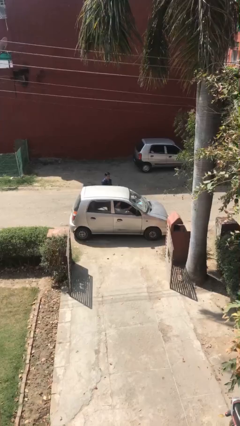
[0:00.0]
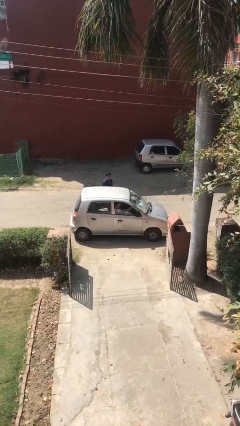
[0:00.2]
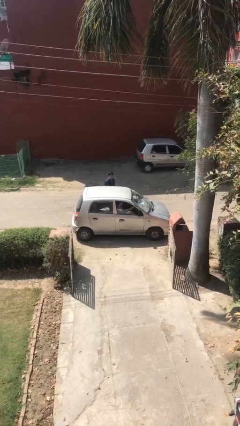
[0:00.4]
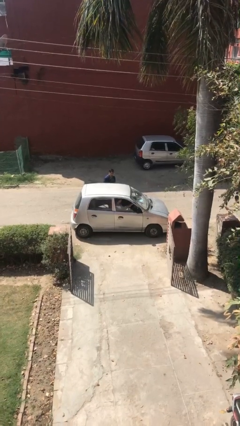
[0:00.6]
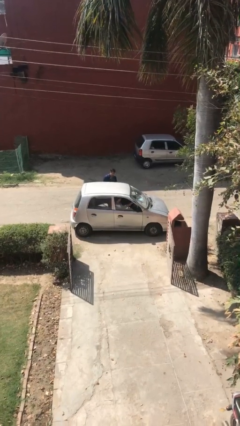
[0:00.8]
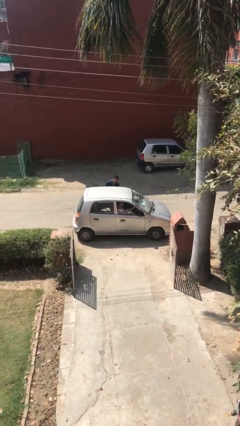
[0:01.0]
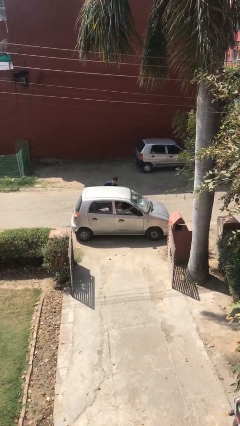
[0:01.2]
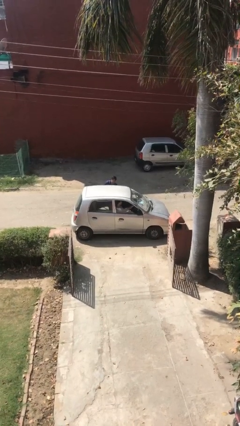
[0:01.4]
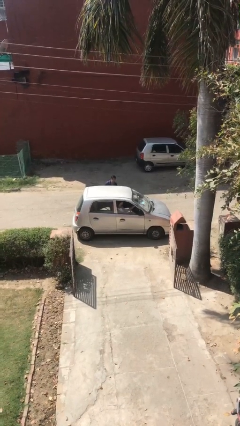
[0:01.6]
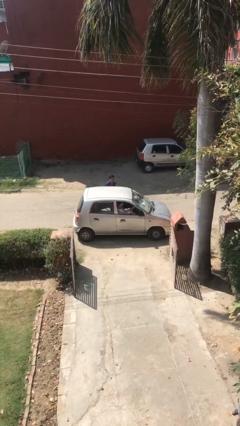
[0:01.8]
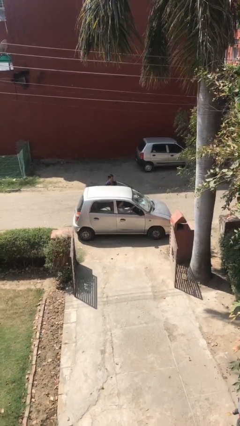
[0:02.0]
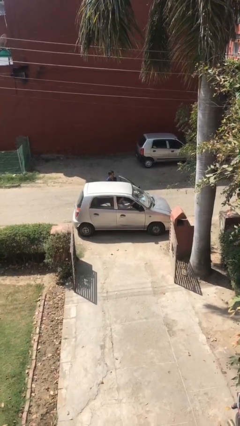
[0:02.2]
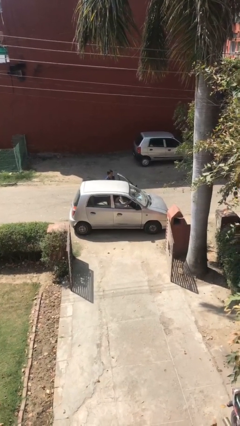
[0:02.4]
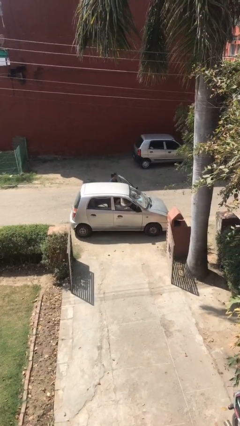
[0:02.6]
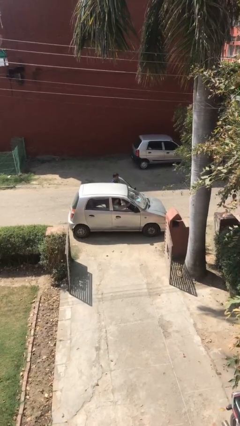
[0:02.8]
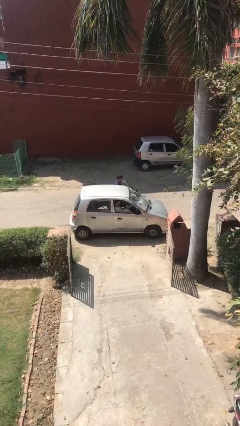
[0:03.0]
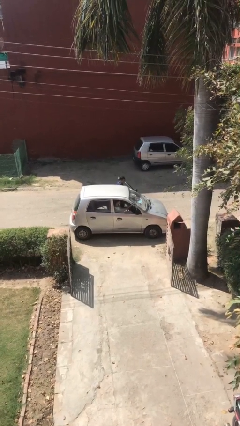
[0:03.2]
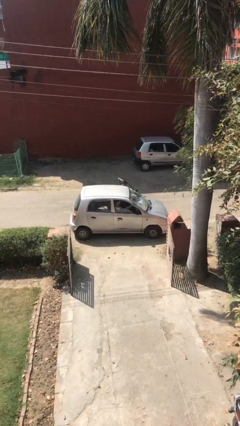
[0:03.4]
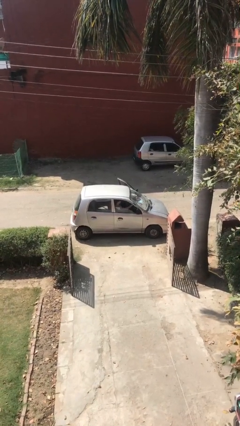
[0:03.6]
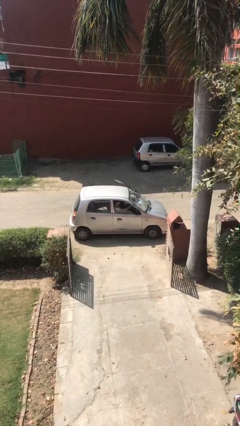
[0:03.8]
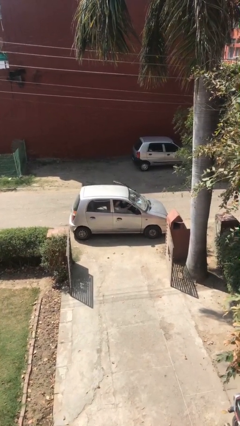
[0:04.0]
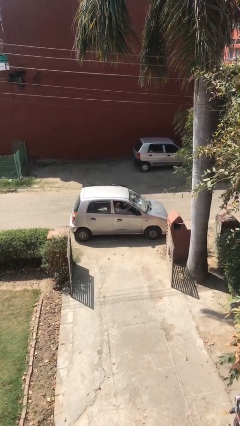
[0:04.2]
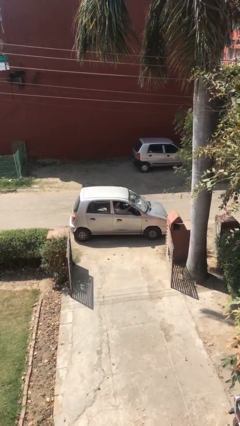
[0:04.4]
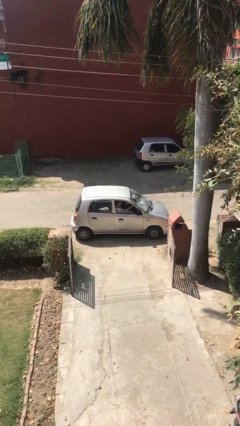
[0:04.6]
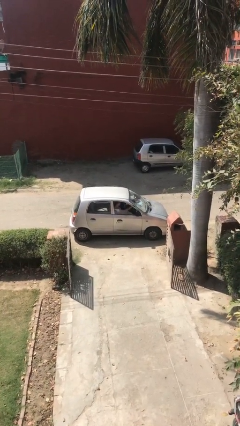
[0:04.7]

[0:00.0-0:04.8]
car picks up person

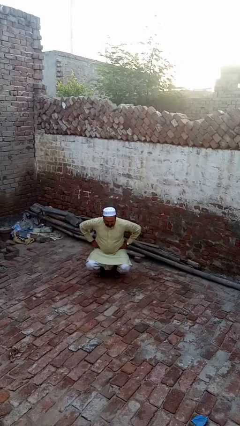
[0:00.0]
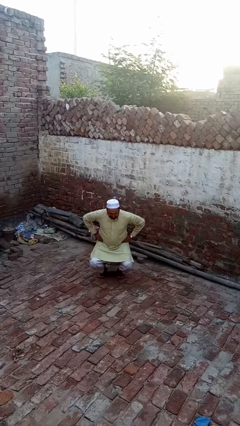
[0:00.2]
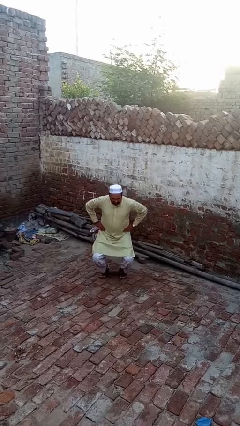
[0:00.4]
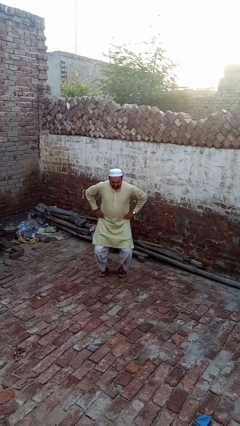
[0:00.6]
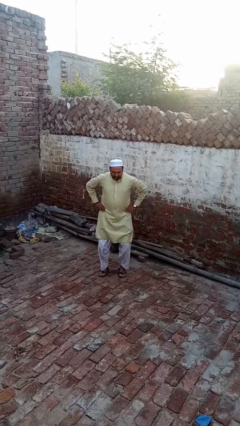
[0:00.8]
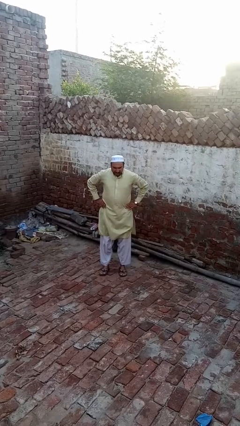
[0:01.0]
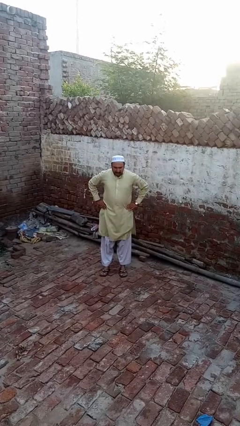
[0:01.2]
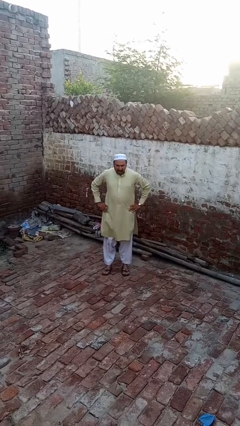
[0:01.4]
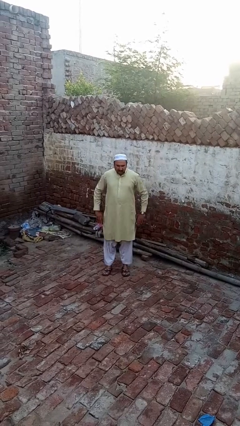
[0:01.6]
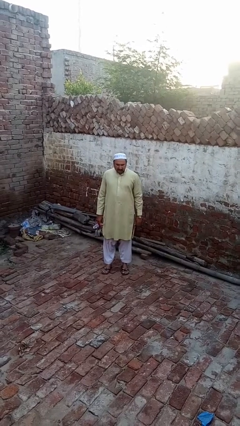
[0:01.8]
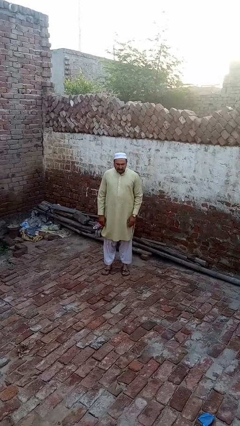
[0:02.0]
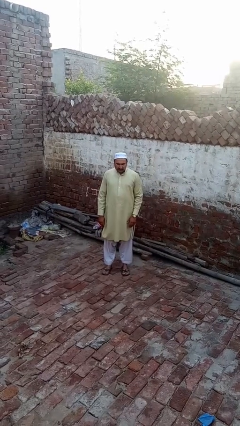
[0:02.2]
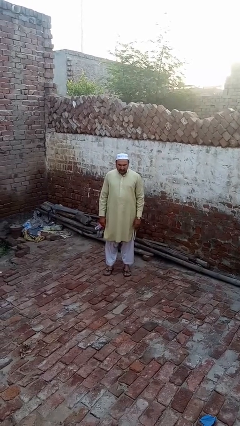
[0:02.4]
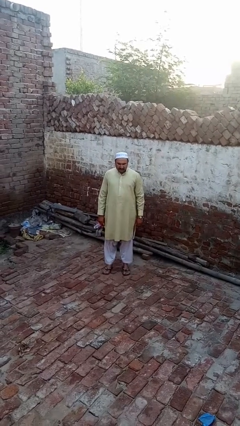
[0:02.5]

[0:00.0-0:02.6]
person stands up

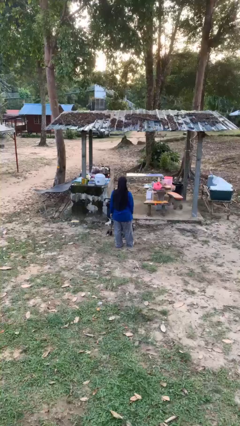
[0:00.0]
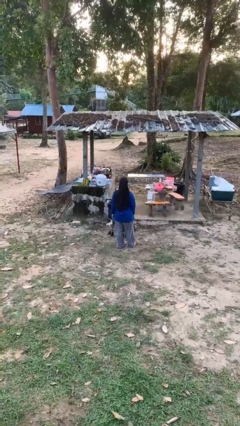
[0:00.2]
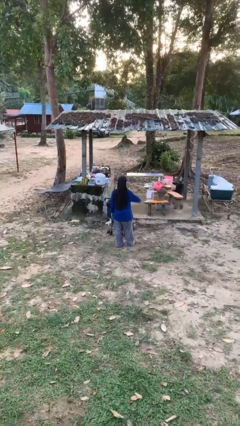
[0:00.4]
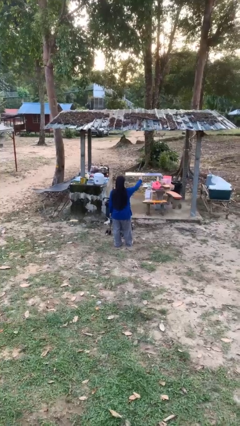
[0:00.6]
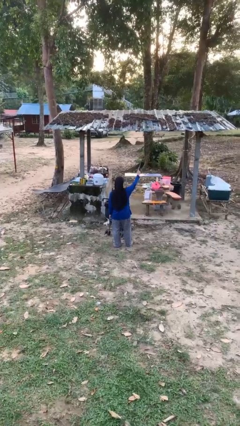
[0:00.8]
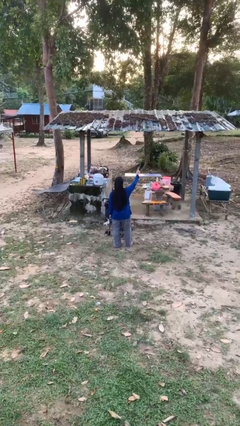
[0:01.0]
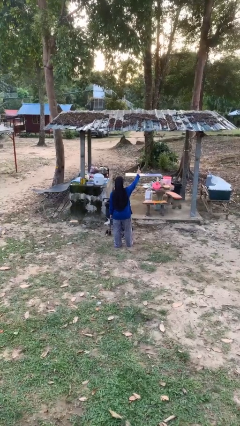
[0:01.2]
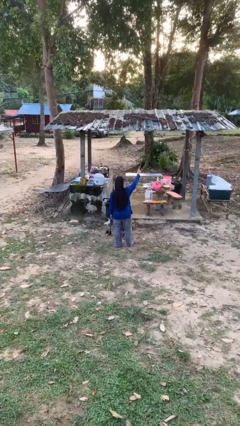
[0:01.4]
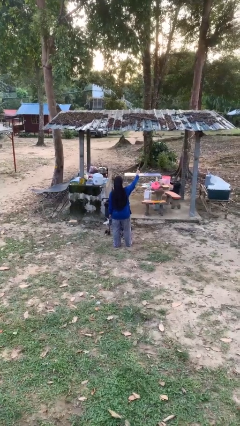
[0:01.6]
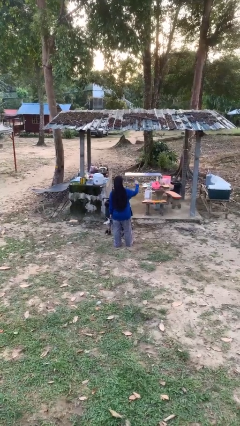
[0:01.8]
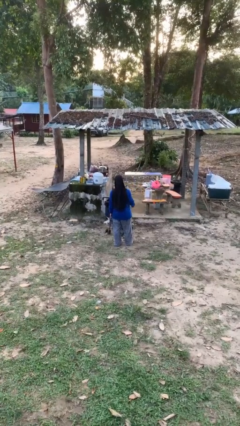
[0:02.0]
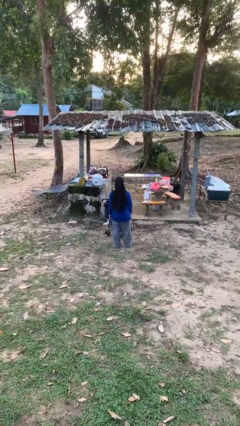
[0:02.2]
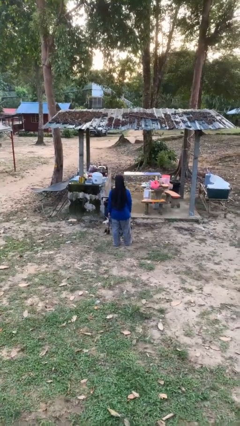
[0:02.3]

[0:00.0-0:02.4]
person gestures number one

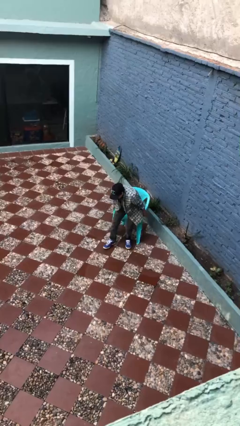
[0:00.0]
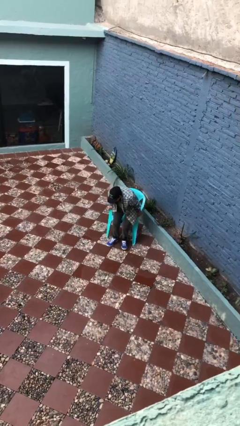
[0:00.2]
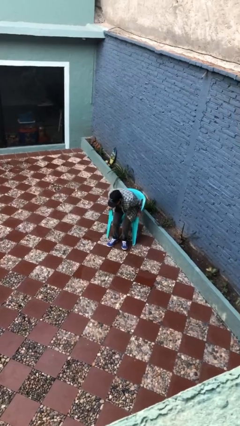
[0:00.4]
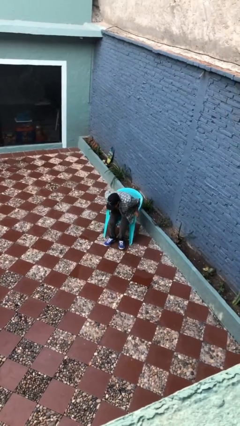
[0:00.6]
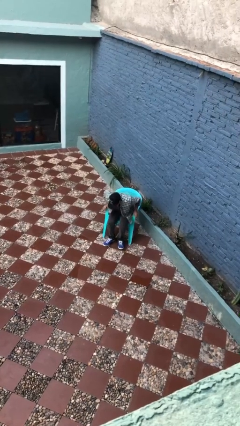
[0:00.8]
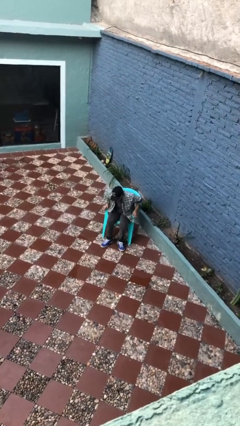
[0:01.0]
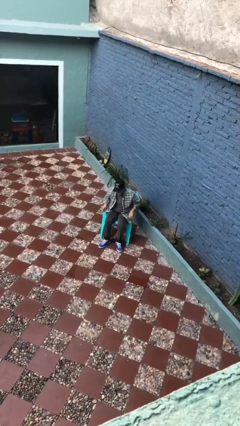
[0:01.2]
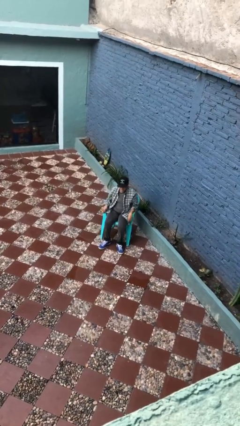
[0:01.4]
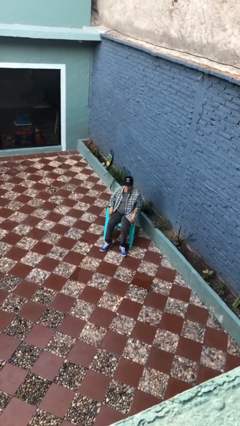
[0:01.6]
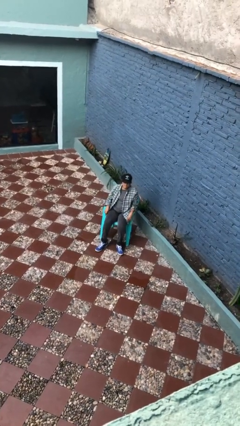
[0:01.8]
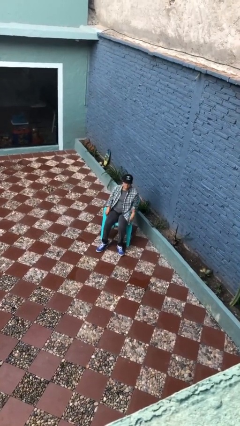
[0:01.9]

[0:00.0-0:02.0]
person sits down

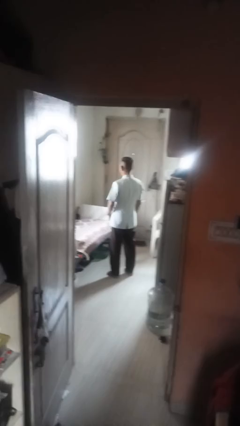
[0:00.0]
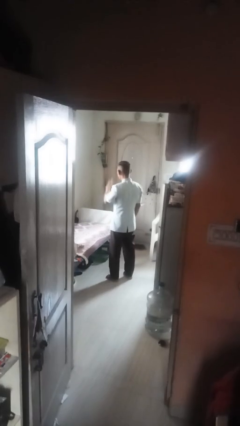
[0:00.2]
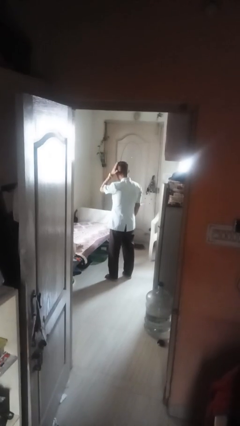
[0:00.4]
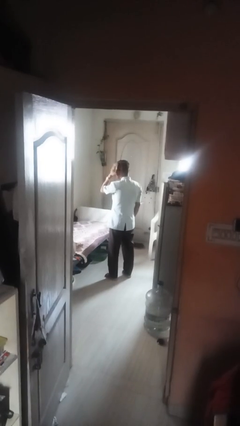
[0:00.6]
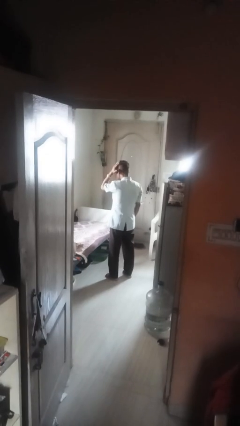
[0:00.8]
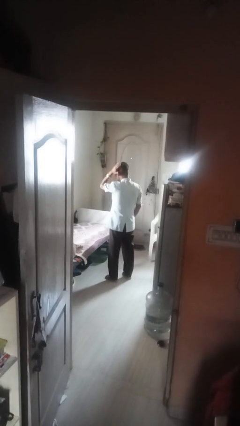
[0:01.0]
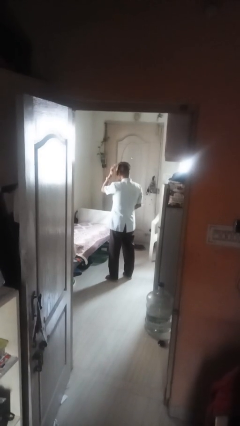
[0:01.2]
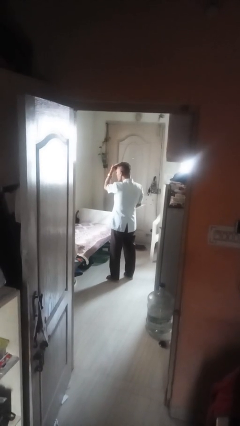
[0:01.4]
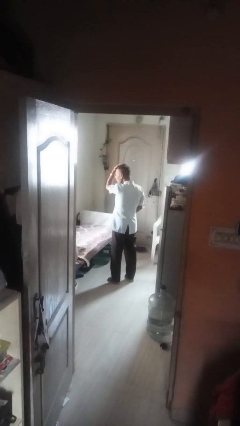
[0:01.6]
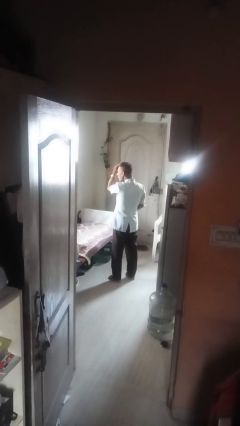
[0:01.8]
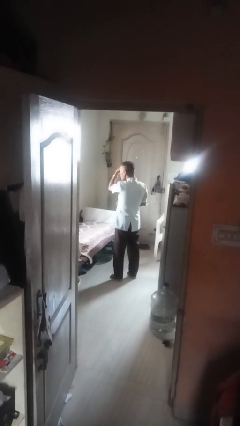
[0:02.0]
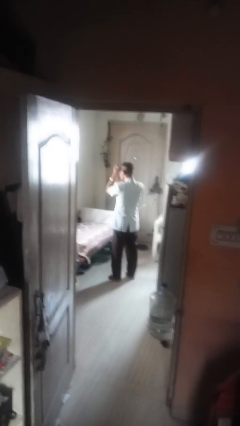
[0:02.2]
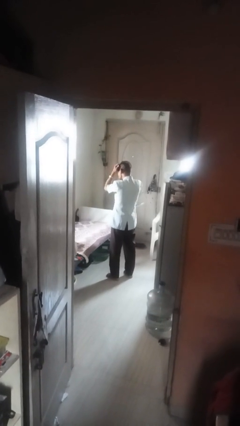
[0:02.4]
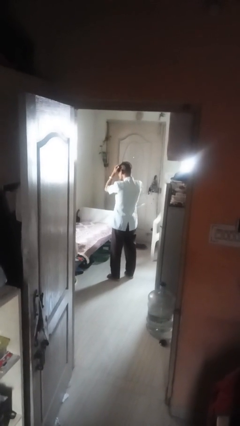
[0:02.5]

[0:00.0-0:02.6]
person strokes hair

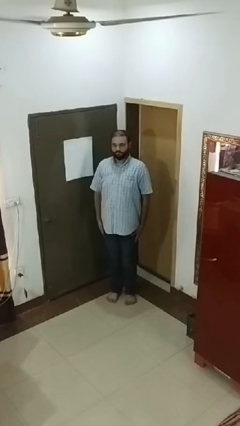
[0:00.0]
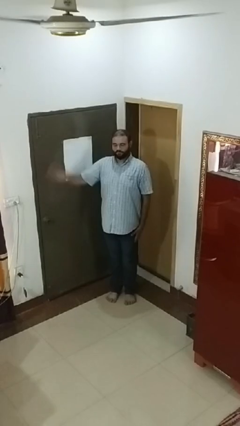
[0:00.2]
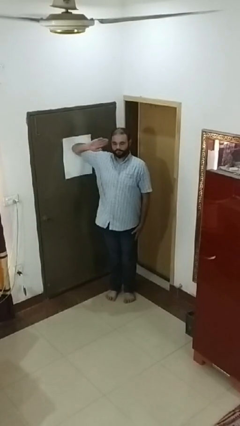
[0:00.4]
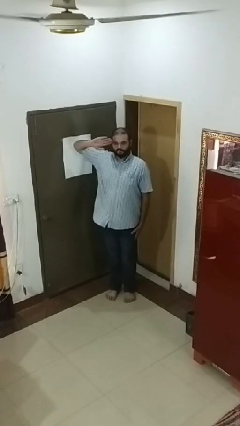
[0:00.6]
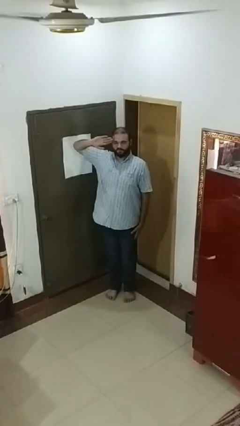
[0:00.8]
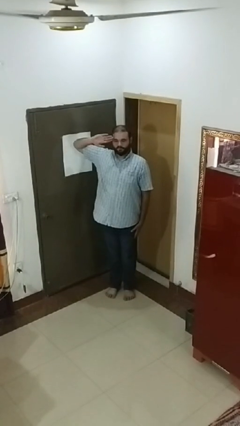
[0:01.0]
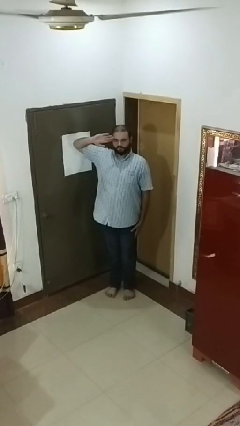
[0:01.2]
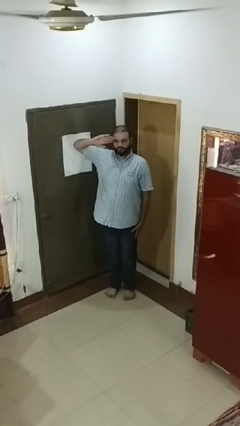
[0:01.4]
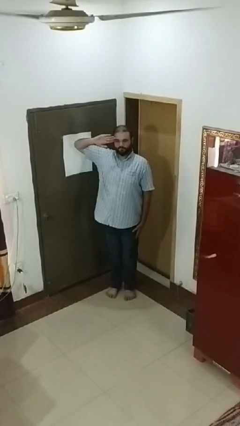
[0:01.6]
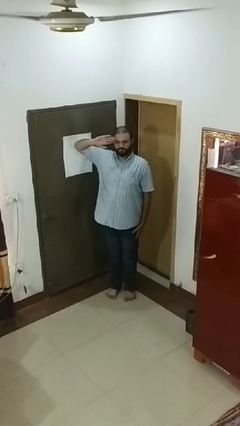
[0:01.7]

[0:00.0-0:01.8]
person salutes

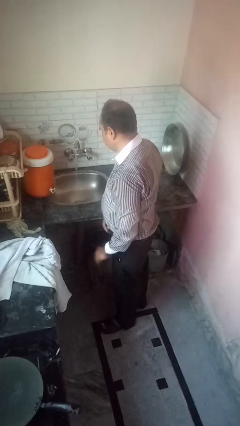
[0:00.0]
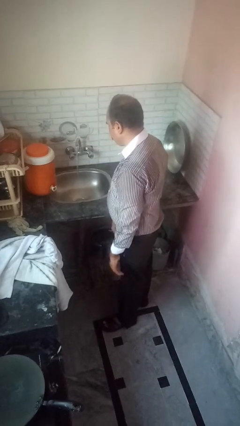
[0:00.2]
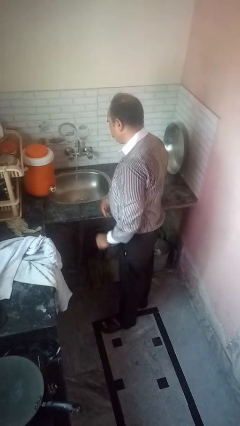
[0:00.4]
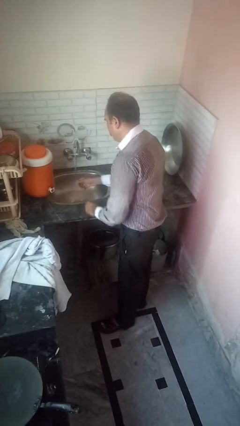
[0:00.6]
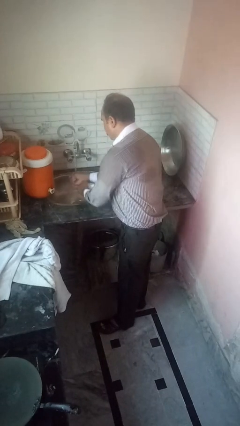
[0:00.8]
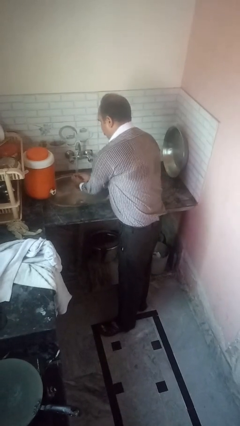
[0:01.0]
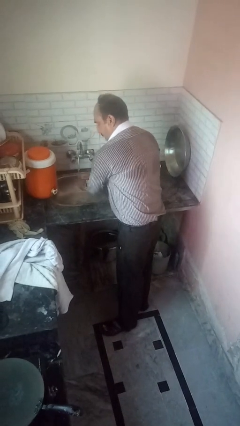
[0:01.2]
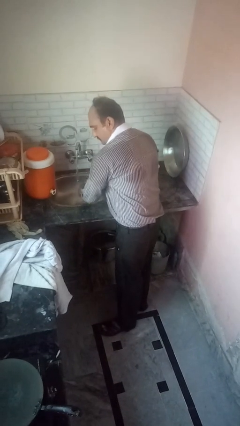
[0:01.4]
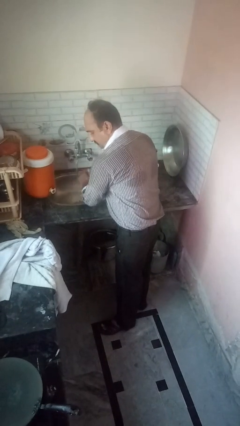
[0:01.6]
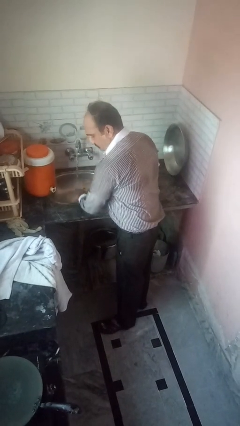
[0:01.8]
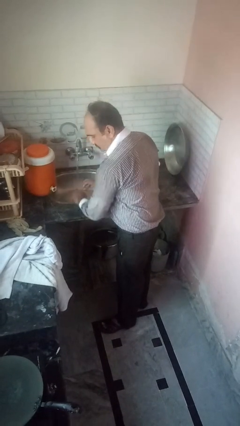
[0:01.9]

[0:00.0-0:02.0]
person washes hands
